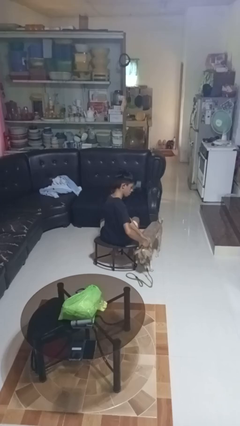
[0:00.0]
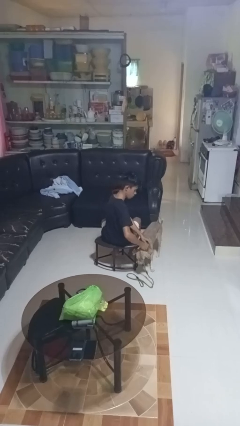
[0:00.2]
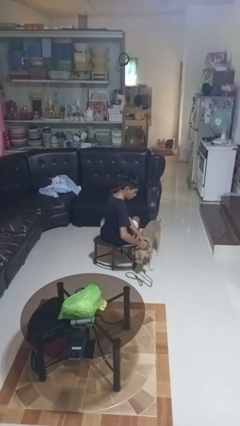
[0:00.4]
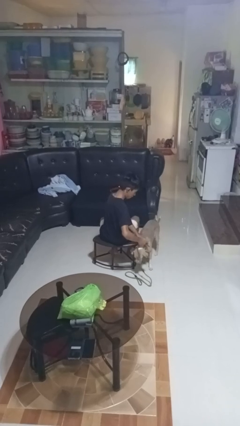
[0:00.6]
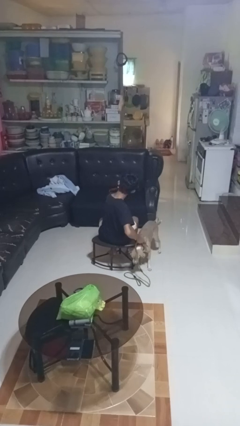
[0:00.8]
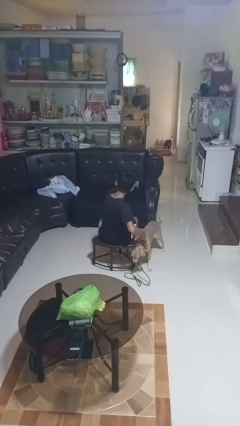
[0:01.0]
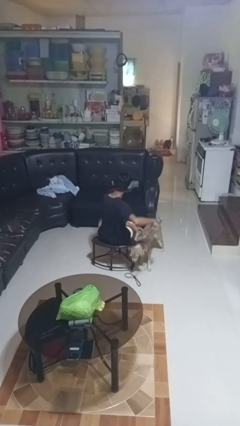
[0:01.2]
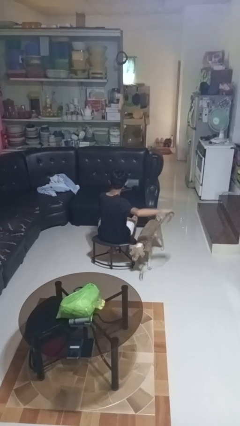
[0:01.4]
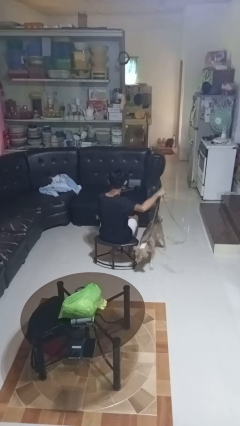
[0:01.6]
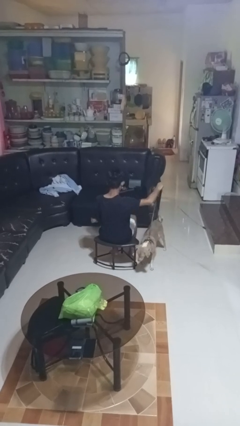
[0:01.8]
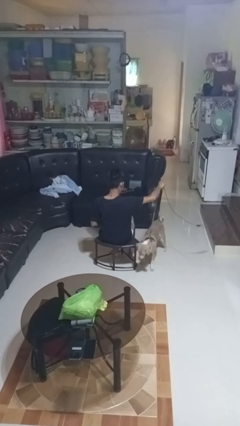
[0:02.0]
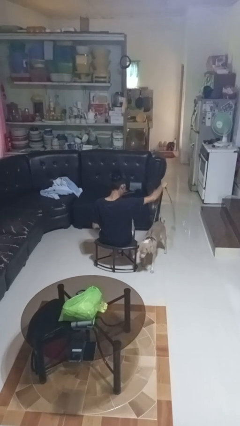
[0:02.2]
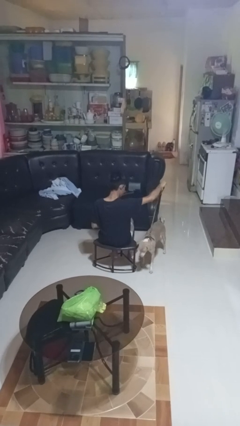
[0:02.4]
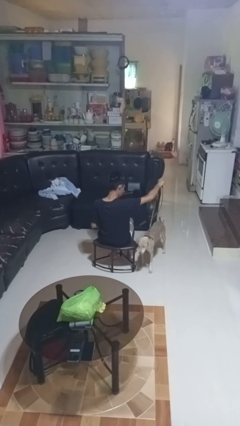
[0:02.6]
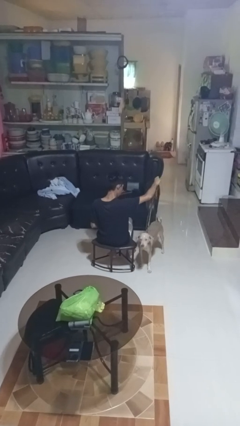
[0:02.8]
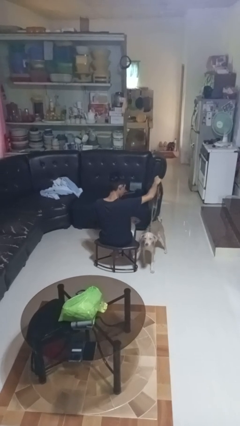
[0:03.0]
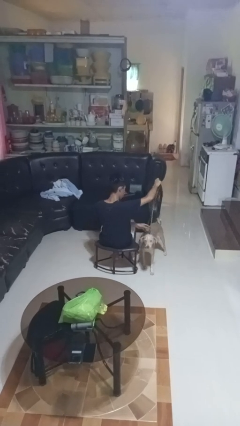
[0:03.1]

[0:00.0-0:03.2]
person attaches leash to dog

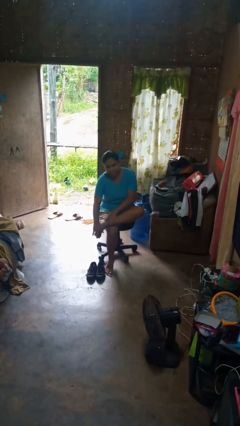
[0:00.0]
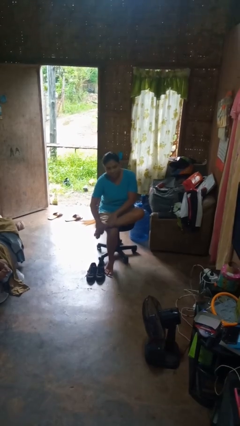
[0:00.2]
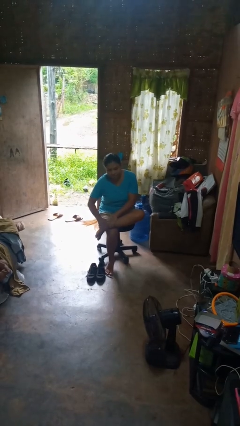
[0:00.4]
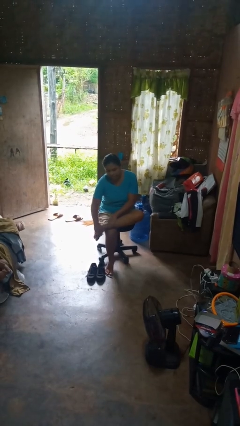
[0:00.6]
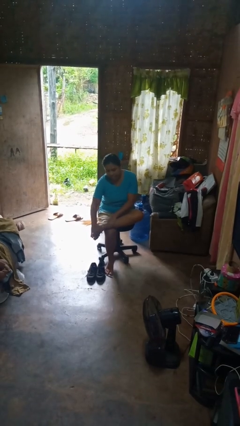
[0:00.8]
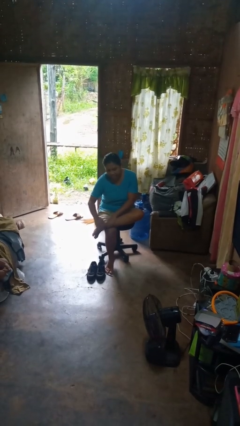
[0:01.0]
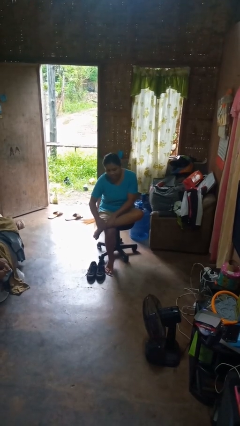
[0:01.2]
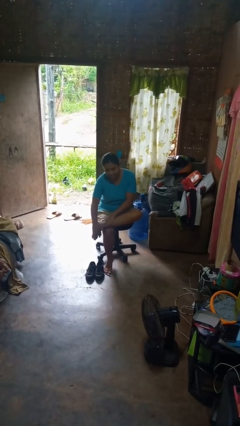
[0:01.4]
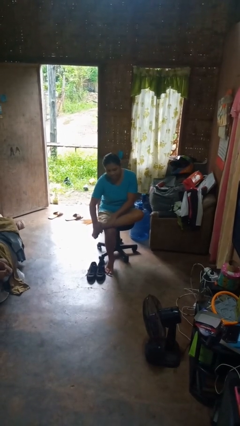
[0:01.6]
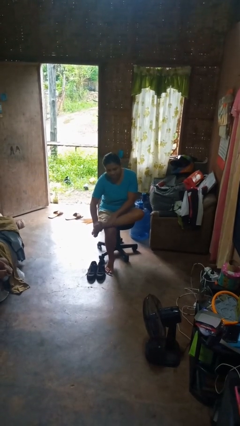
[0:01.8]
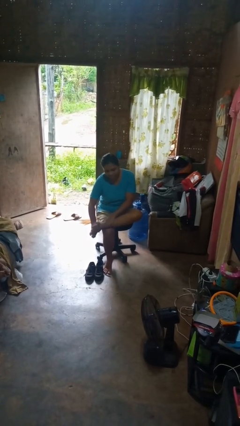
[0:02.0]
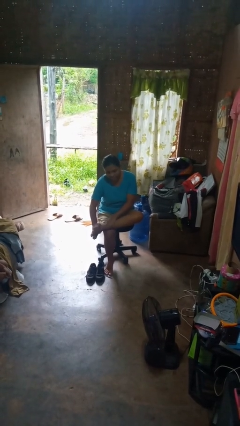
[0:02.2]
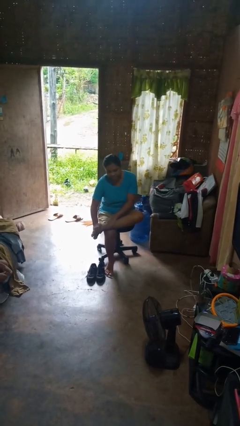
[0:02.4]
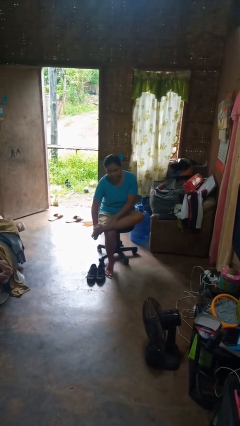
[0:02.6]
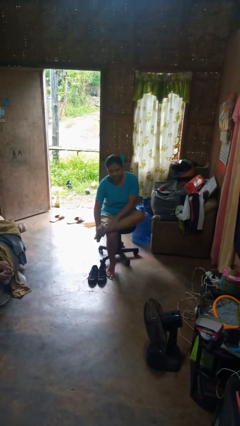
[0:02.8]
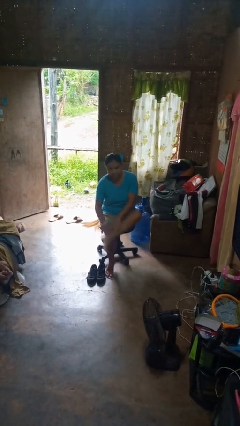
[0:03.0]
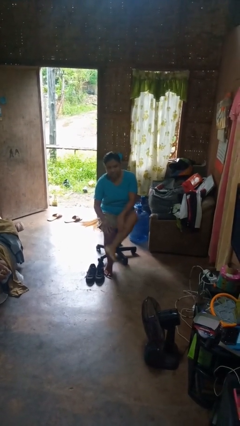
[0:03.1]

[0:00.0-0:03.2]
person rubs foot

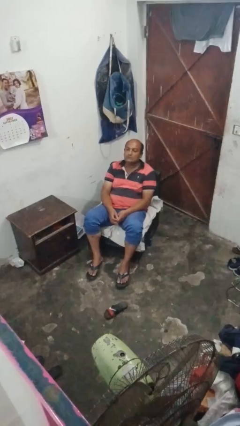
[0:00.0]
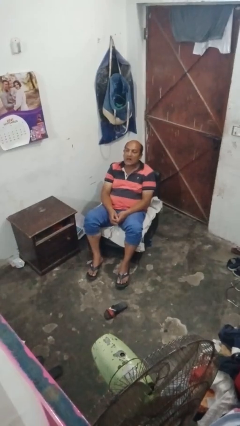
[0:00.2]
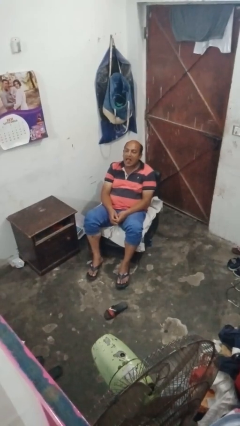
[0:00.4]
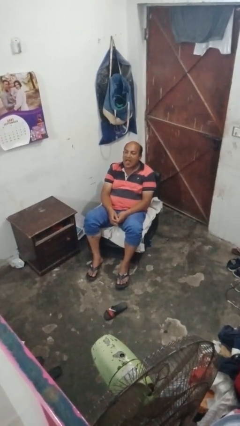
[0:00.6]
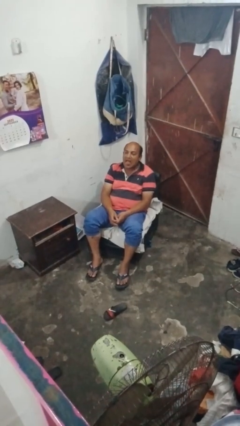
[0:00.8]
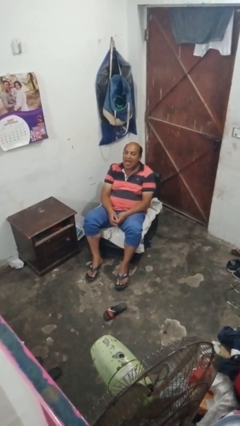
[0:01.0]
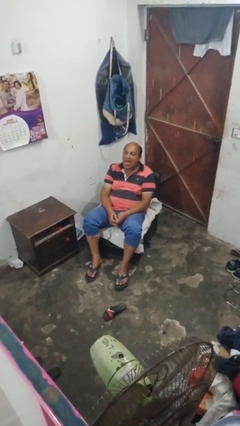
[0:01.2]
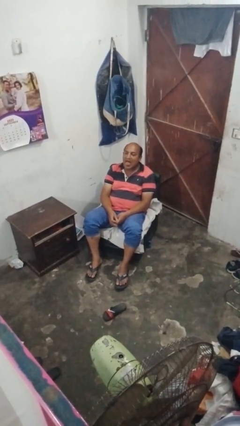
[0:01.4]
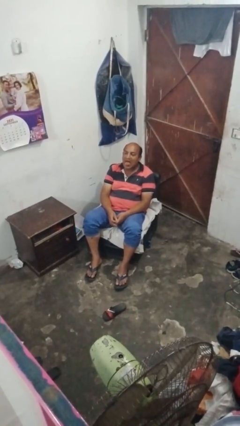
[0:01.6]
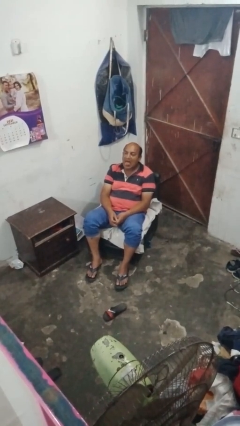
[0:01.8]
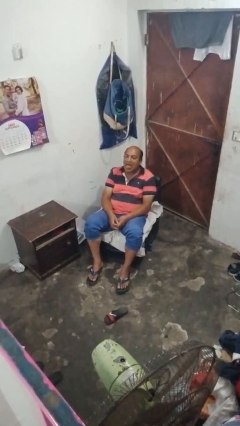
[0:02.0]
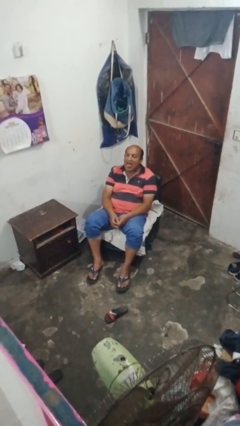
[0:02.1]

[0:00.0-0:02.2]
person sticks out tongue

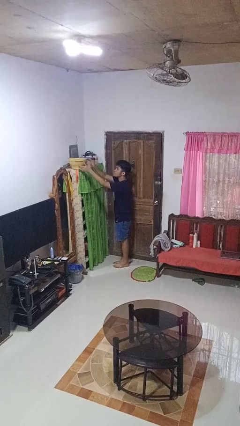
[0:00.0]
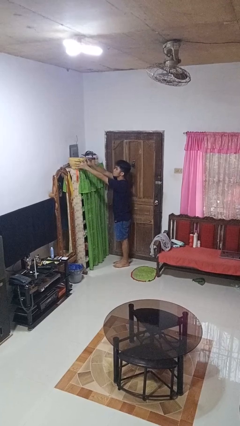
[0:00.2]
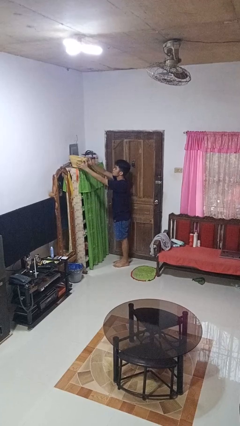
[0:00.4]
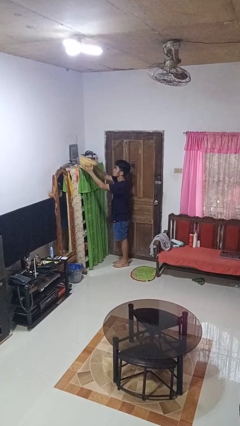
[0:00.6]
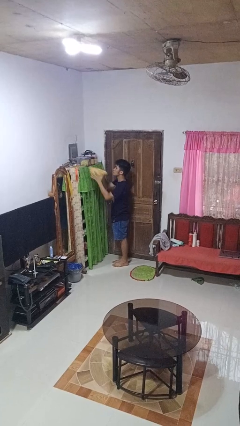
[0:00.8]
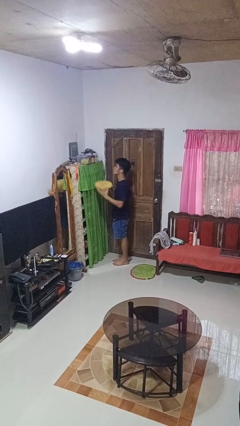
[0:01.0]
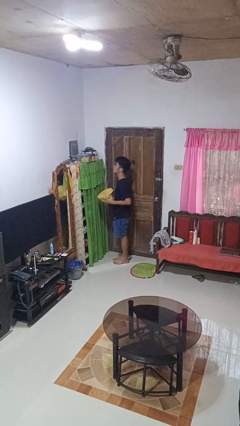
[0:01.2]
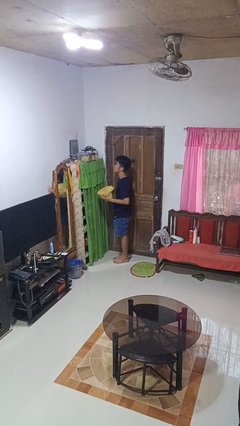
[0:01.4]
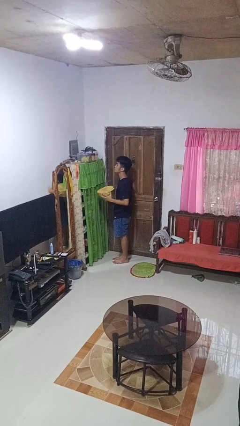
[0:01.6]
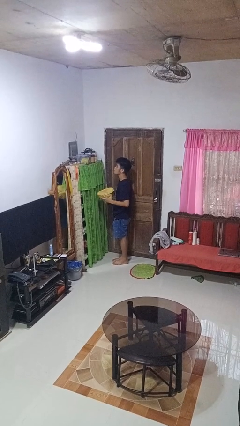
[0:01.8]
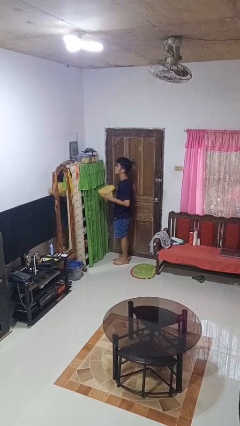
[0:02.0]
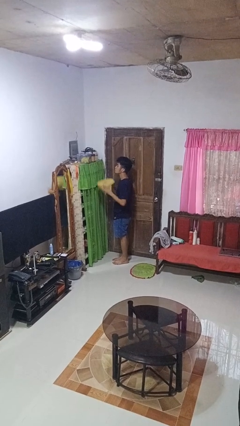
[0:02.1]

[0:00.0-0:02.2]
person picks up object from shelf

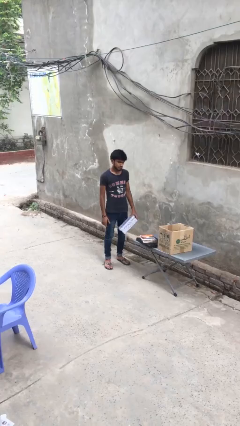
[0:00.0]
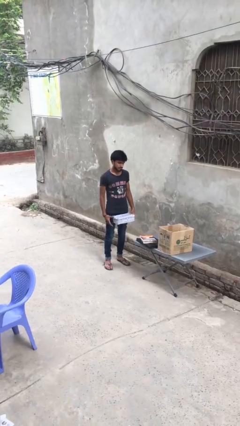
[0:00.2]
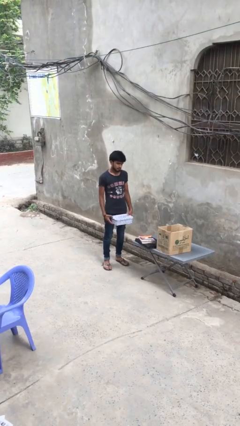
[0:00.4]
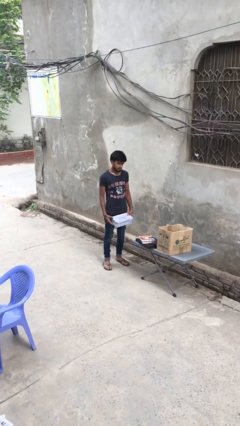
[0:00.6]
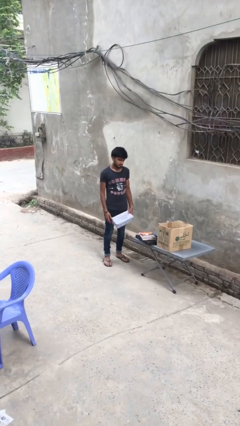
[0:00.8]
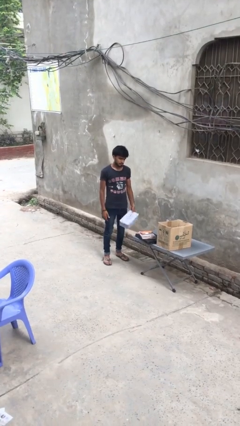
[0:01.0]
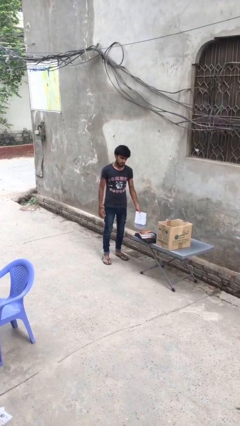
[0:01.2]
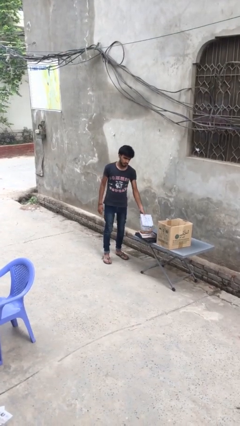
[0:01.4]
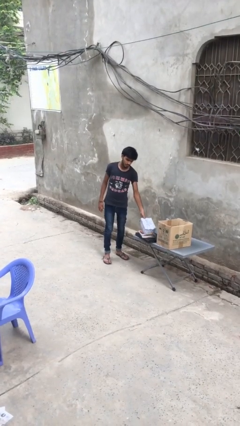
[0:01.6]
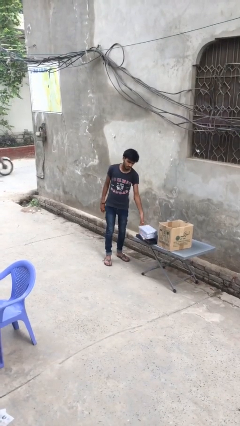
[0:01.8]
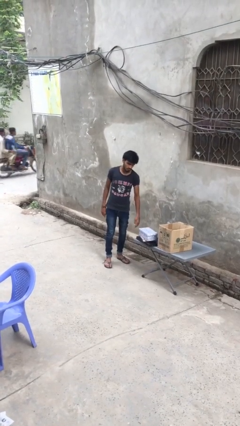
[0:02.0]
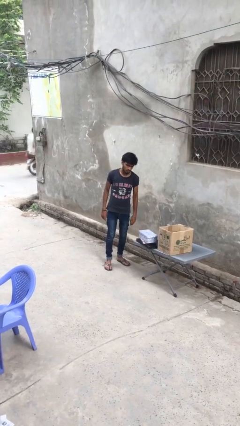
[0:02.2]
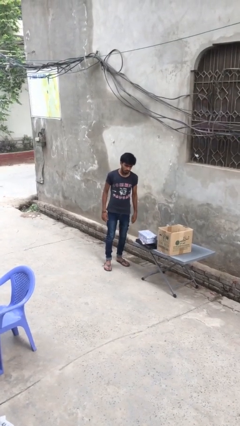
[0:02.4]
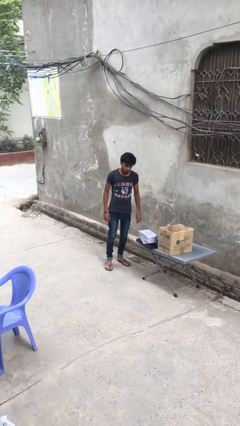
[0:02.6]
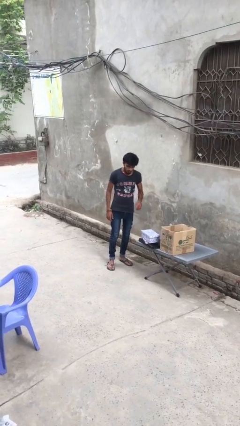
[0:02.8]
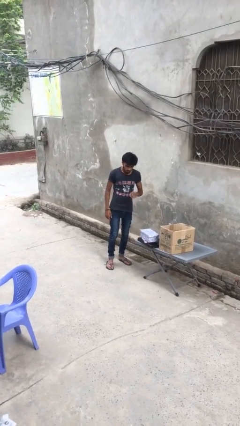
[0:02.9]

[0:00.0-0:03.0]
person puts down object on table

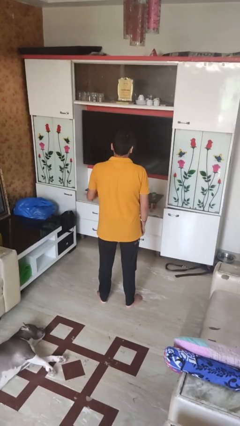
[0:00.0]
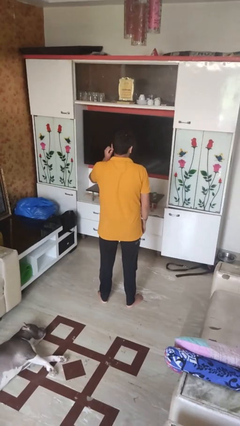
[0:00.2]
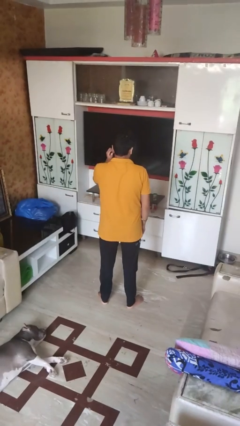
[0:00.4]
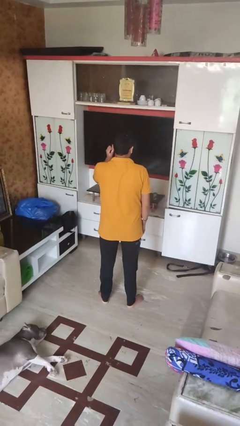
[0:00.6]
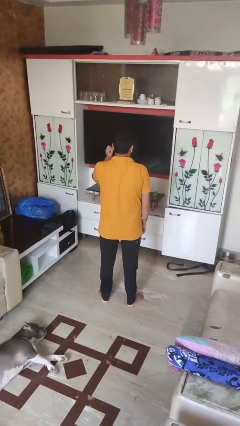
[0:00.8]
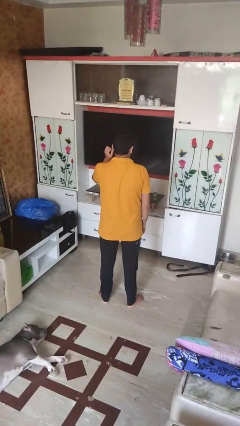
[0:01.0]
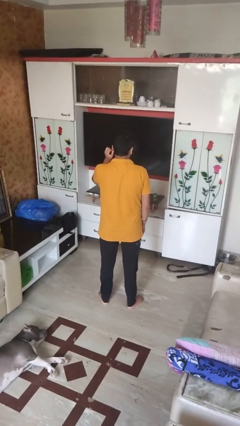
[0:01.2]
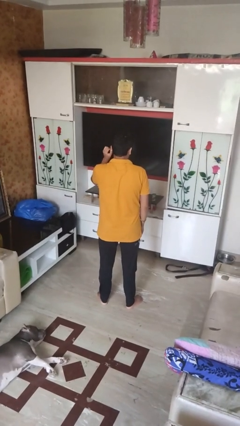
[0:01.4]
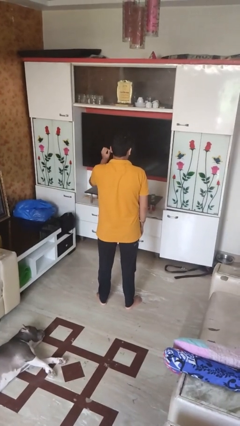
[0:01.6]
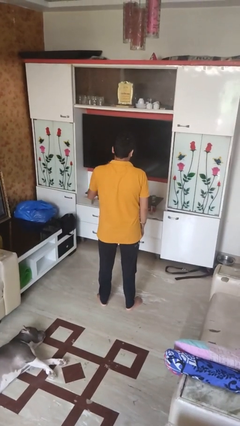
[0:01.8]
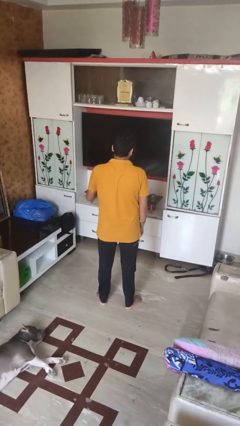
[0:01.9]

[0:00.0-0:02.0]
person touches earlobe

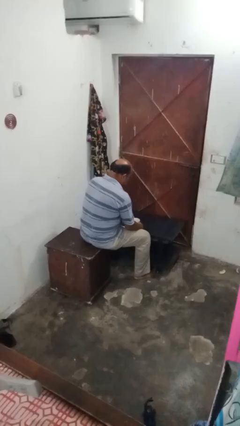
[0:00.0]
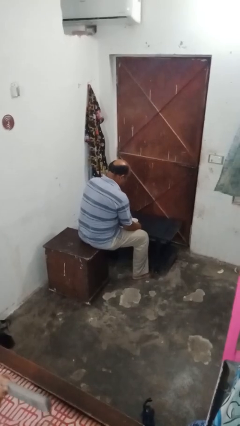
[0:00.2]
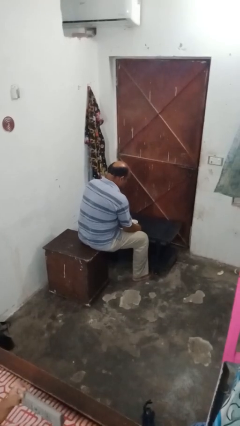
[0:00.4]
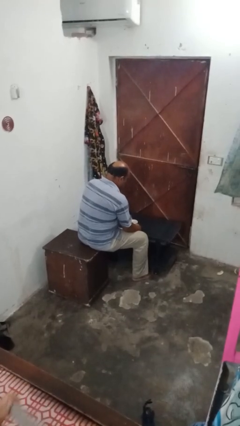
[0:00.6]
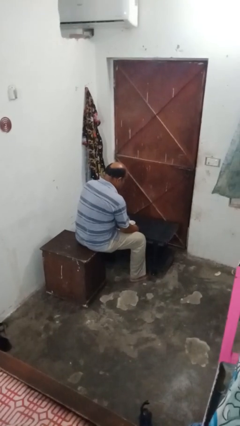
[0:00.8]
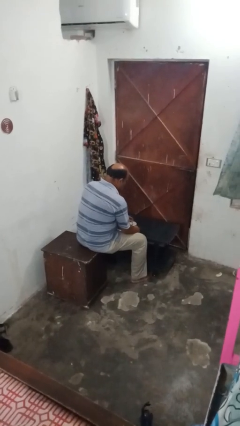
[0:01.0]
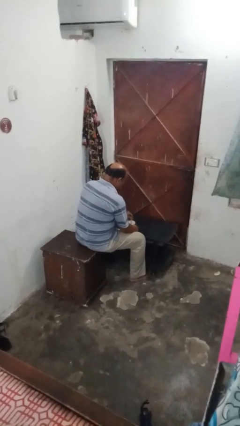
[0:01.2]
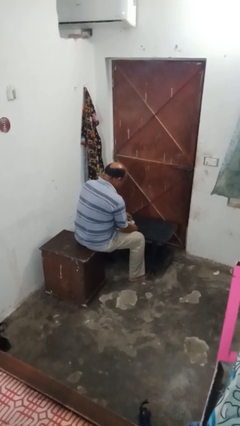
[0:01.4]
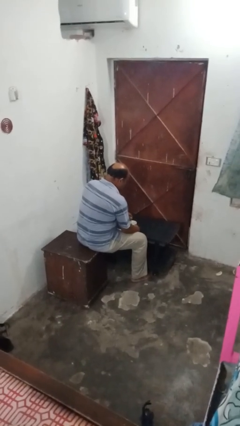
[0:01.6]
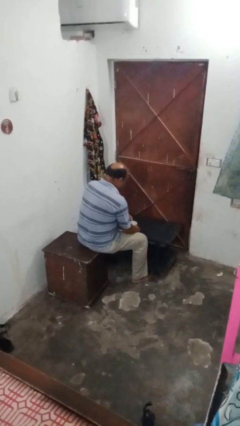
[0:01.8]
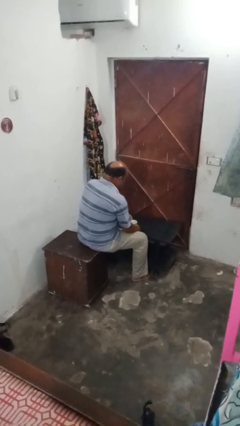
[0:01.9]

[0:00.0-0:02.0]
person stirs mug
